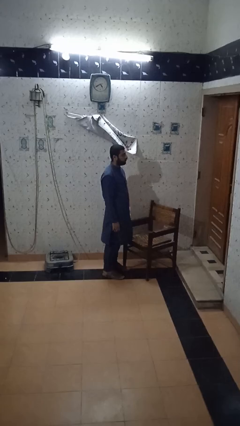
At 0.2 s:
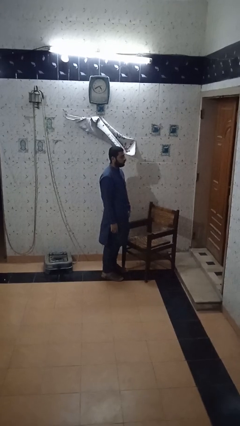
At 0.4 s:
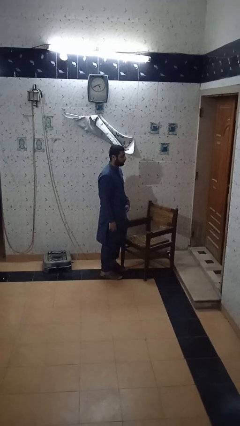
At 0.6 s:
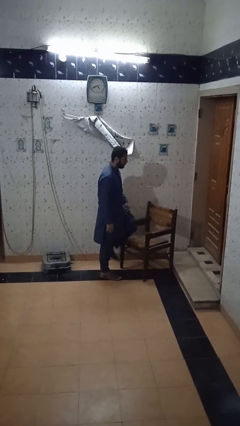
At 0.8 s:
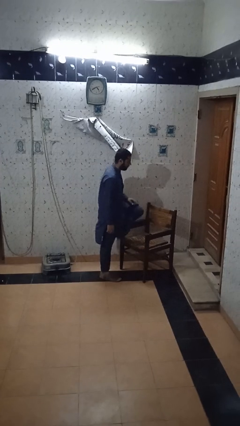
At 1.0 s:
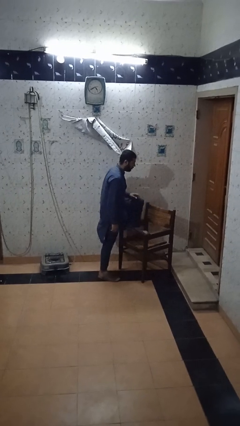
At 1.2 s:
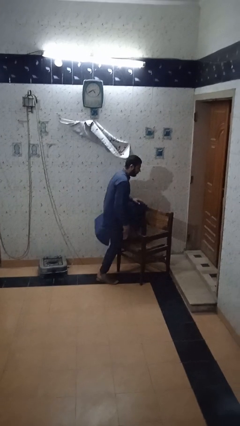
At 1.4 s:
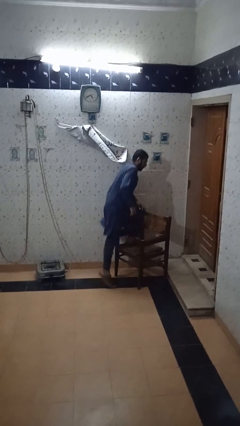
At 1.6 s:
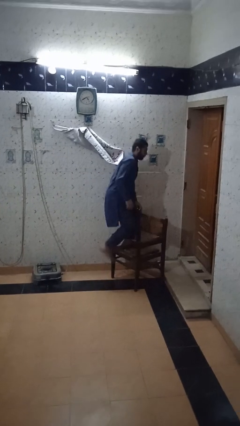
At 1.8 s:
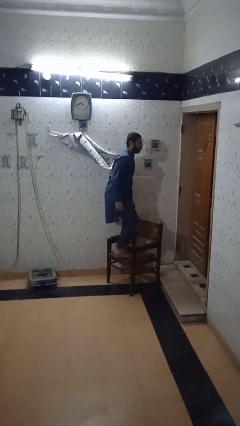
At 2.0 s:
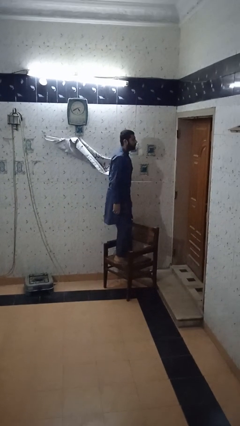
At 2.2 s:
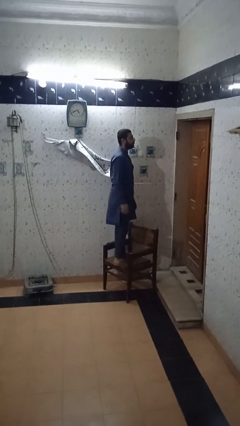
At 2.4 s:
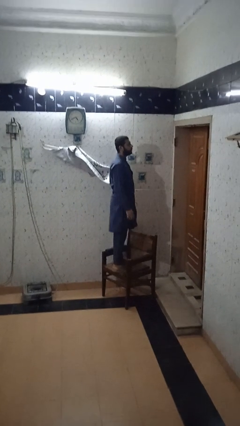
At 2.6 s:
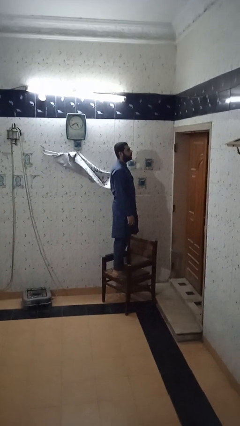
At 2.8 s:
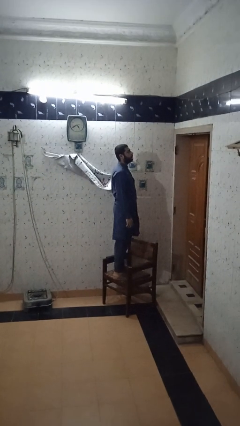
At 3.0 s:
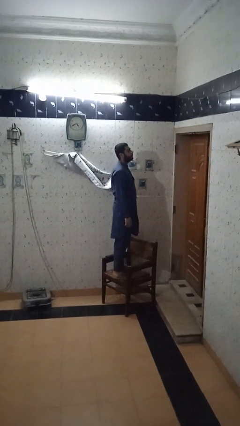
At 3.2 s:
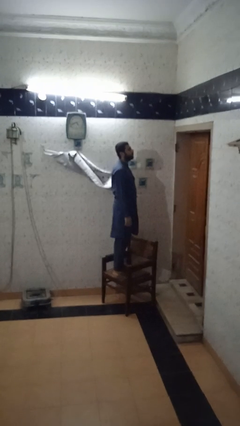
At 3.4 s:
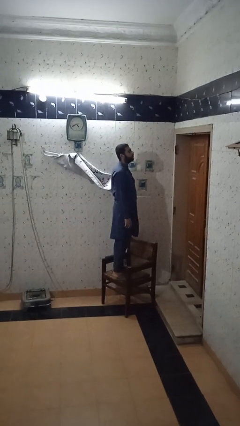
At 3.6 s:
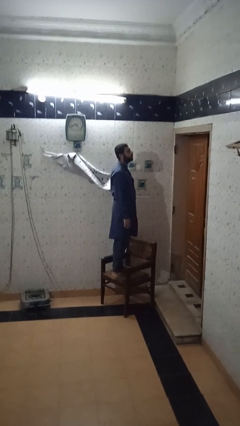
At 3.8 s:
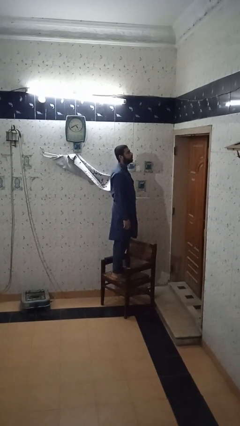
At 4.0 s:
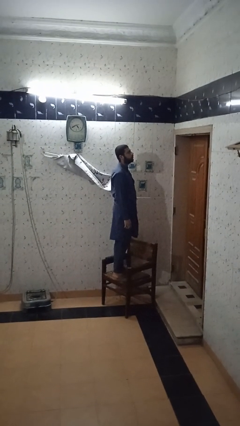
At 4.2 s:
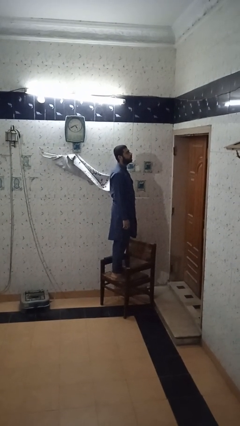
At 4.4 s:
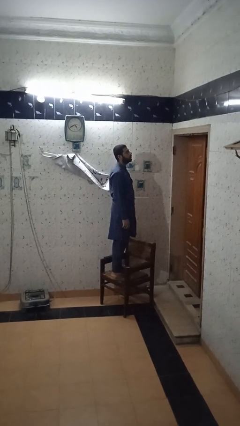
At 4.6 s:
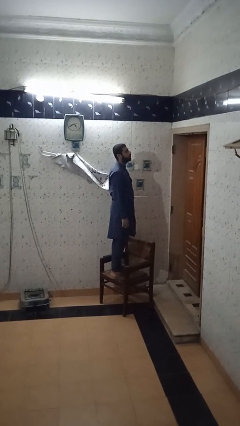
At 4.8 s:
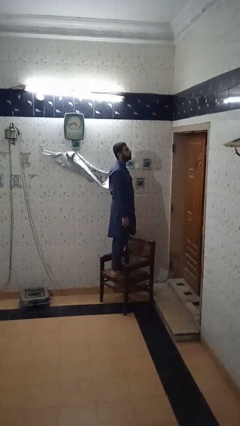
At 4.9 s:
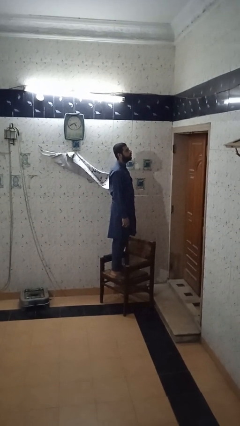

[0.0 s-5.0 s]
person climbs on chair

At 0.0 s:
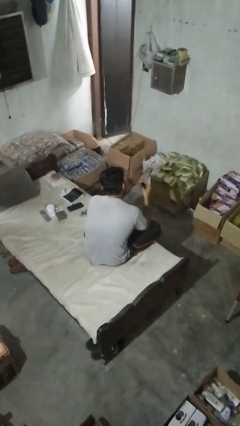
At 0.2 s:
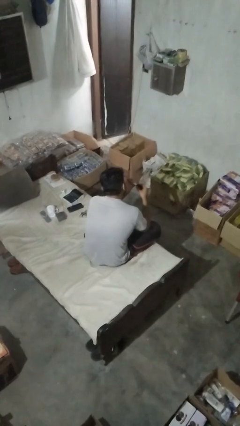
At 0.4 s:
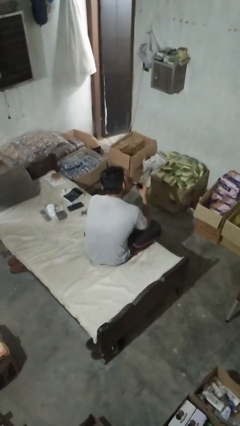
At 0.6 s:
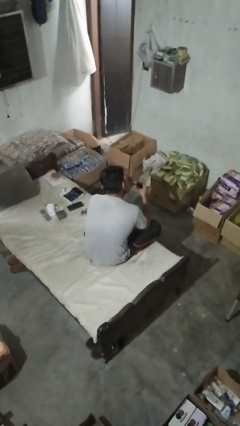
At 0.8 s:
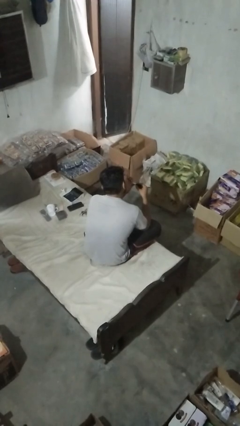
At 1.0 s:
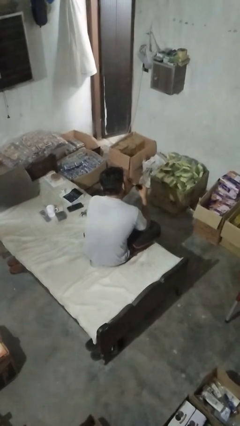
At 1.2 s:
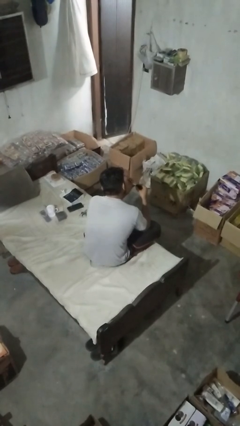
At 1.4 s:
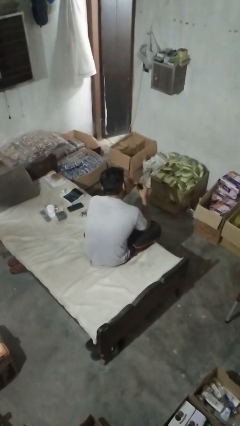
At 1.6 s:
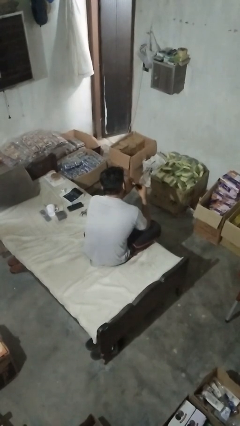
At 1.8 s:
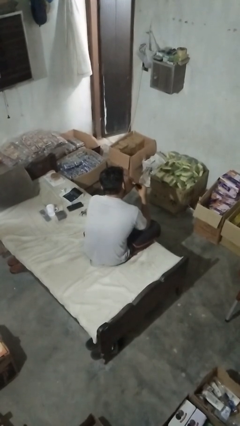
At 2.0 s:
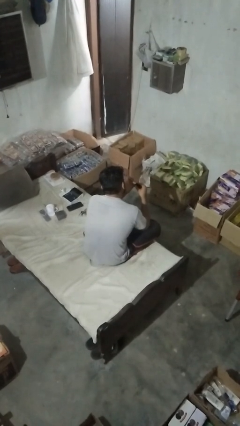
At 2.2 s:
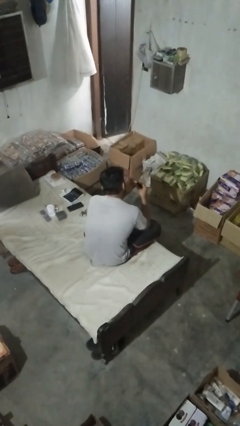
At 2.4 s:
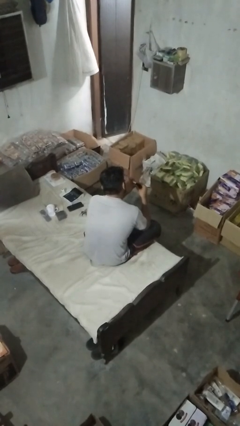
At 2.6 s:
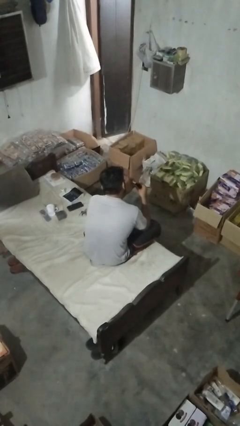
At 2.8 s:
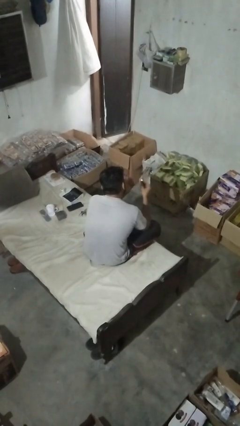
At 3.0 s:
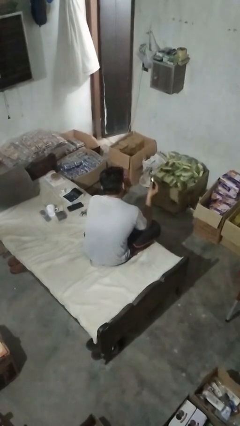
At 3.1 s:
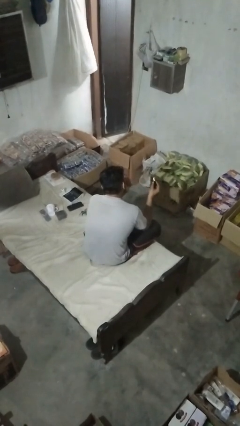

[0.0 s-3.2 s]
person paints fingernails

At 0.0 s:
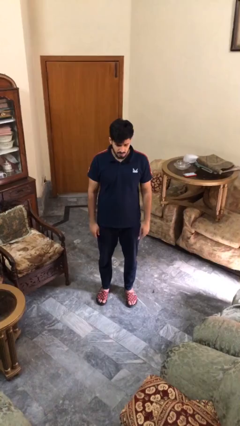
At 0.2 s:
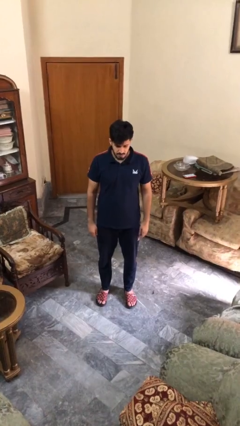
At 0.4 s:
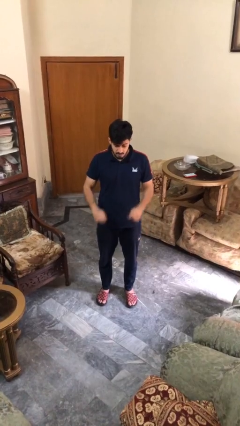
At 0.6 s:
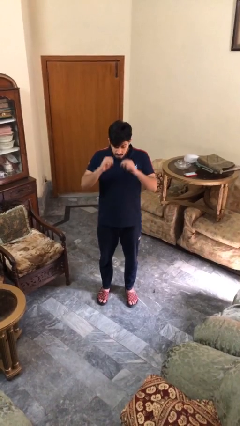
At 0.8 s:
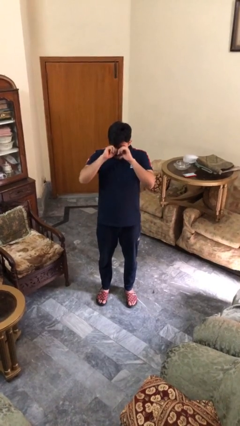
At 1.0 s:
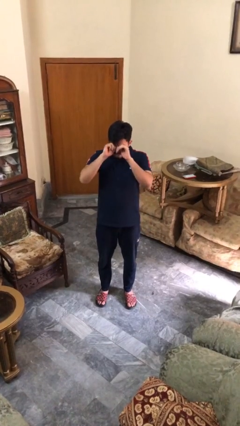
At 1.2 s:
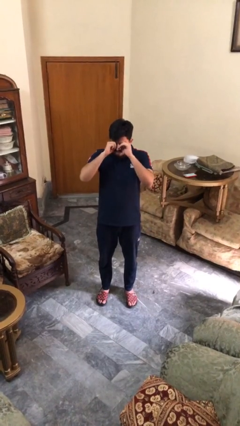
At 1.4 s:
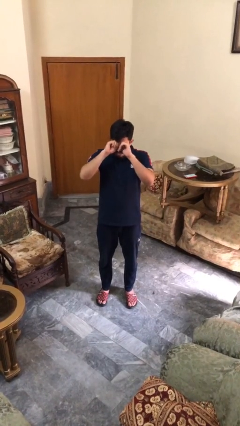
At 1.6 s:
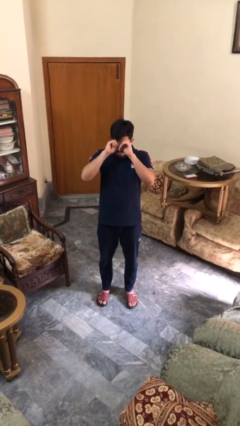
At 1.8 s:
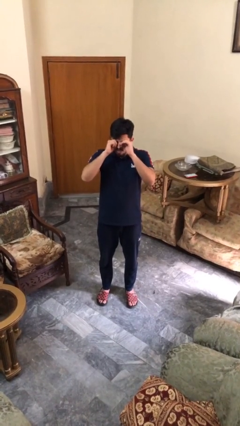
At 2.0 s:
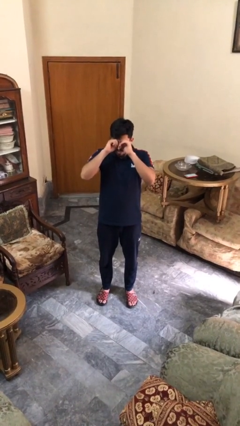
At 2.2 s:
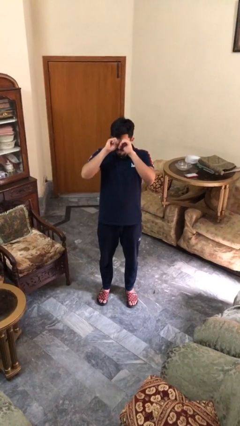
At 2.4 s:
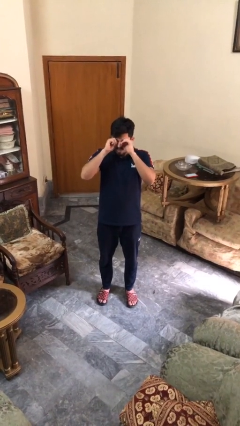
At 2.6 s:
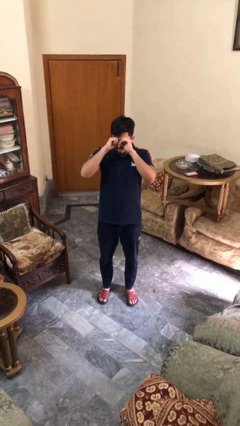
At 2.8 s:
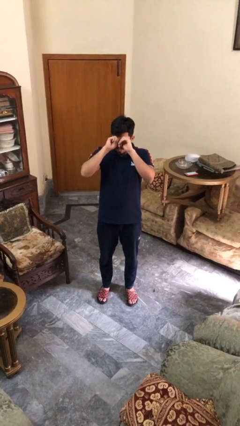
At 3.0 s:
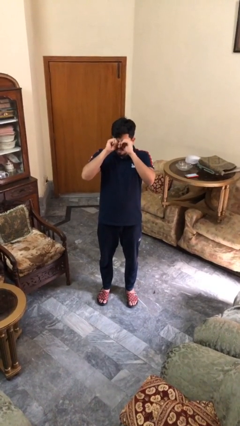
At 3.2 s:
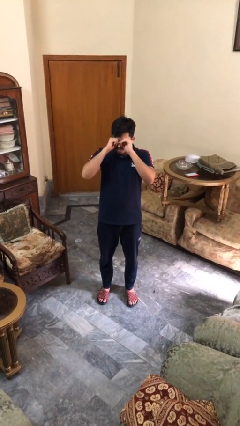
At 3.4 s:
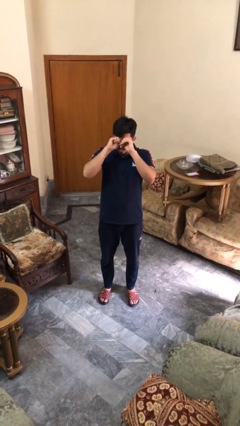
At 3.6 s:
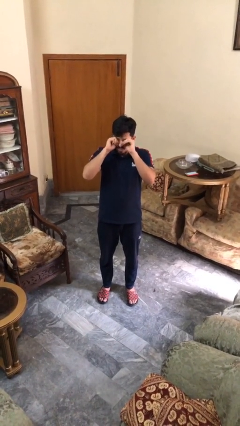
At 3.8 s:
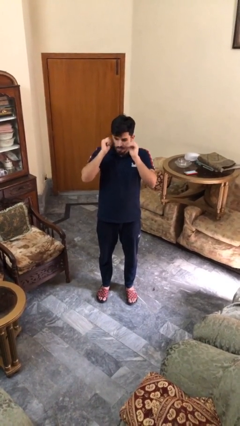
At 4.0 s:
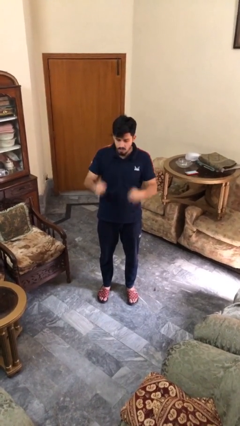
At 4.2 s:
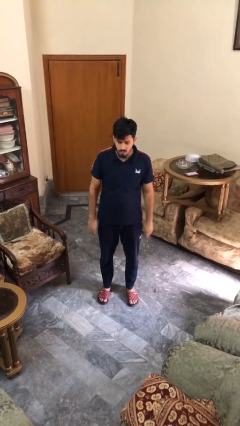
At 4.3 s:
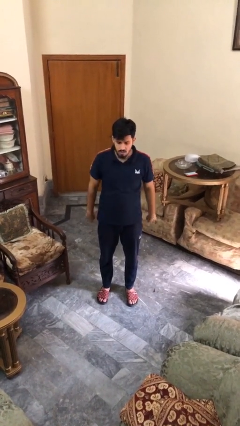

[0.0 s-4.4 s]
person rubs eyes

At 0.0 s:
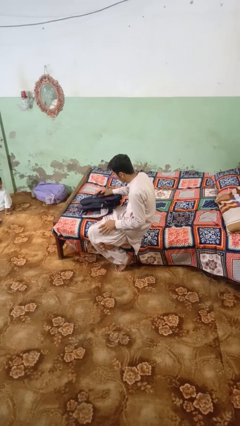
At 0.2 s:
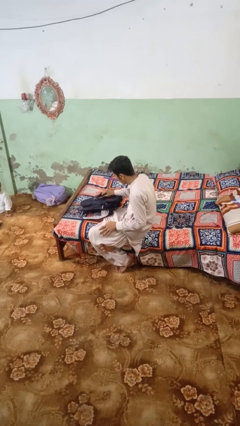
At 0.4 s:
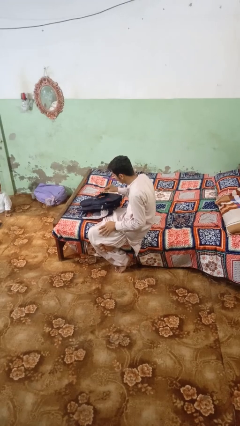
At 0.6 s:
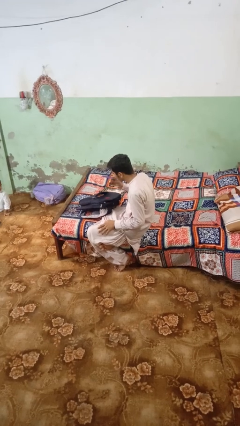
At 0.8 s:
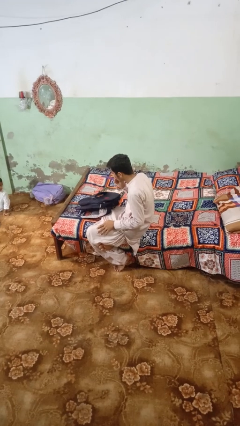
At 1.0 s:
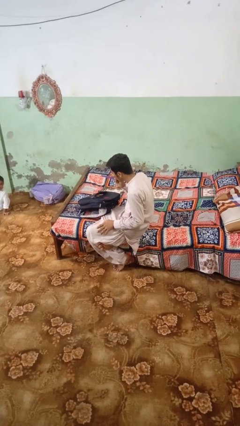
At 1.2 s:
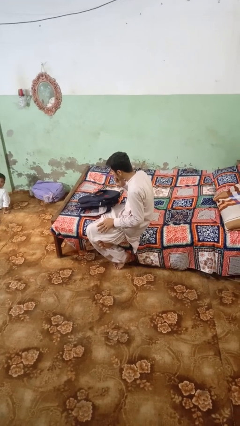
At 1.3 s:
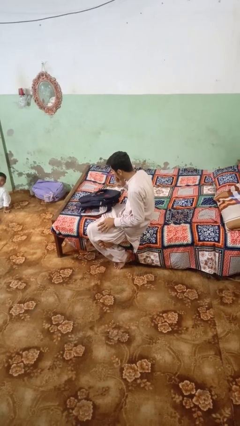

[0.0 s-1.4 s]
person eats snack from bag

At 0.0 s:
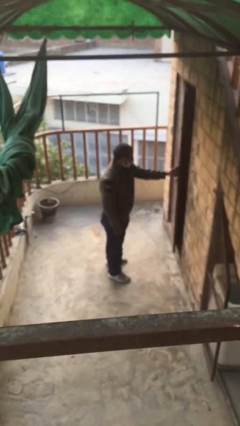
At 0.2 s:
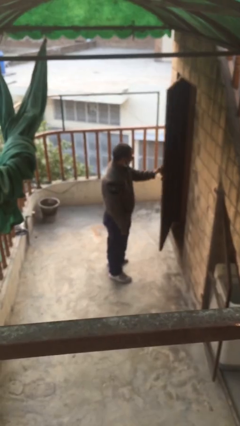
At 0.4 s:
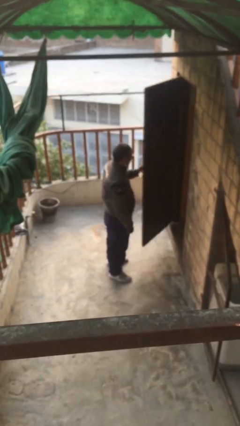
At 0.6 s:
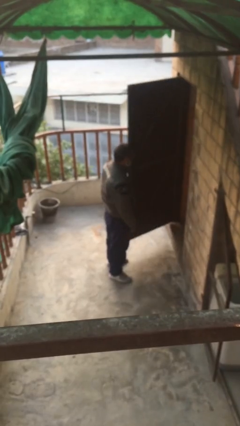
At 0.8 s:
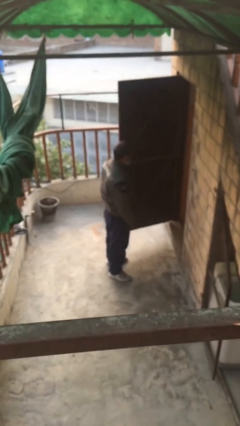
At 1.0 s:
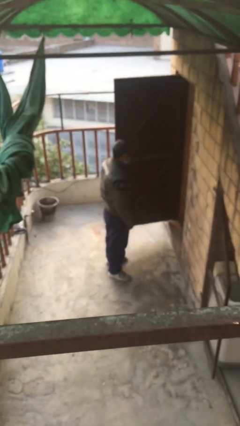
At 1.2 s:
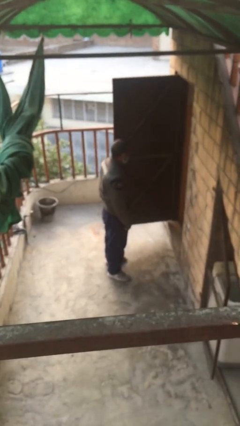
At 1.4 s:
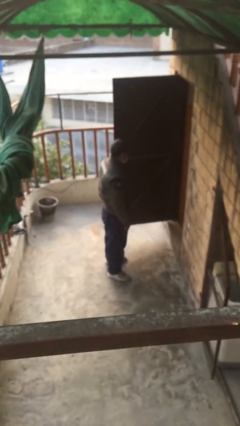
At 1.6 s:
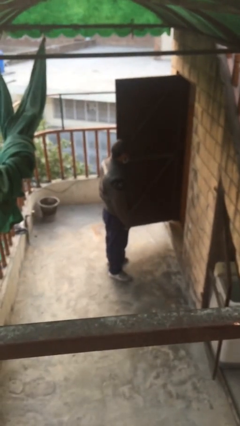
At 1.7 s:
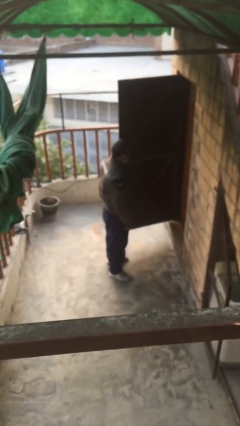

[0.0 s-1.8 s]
person opens facility door

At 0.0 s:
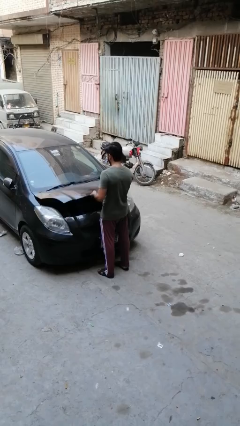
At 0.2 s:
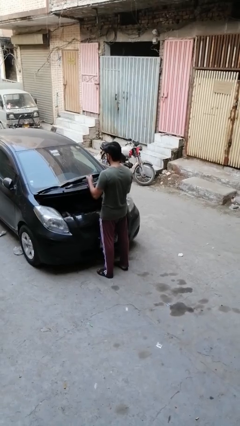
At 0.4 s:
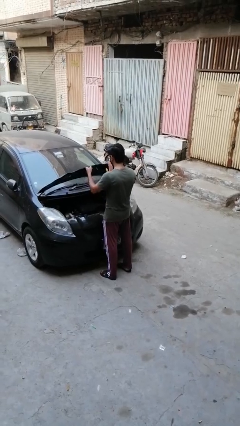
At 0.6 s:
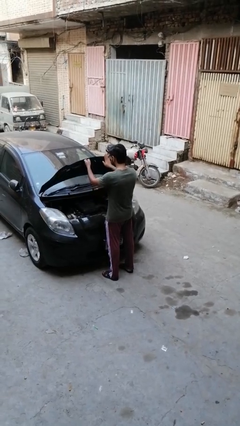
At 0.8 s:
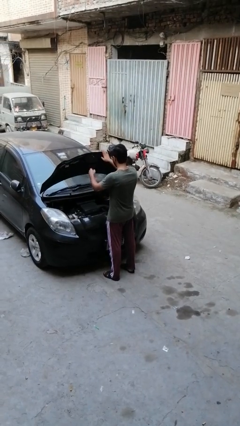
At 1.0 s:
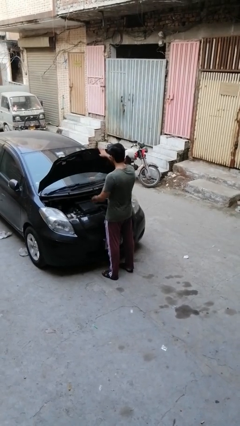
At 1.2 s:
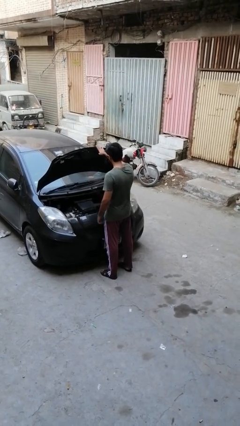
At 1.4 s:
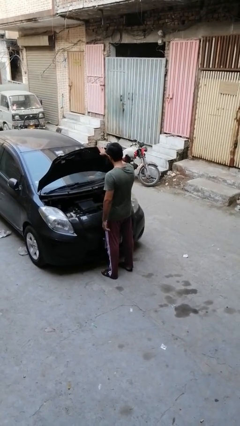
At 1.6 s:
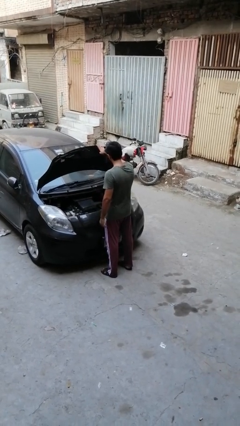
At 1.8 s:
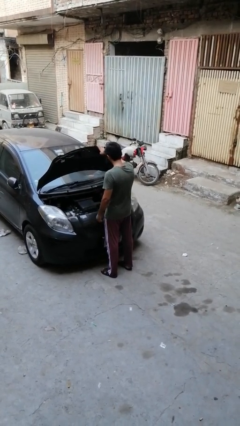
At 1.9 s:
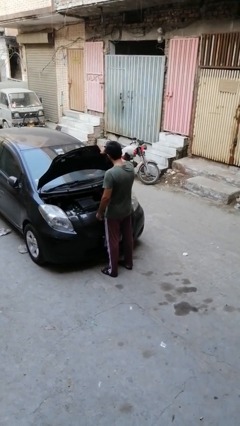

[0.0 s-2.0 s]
person opens car hood
